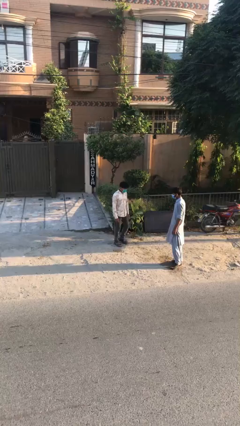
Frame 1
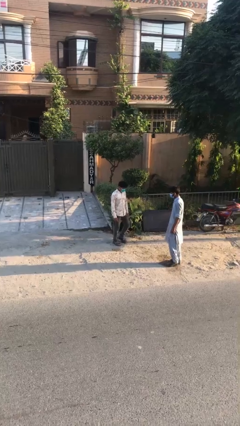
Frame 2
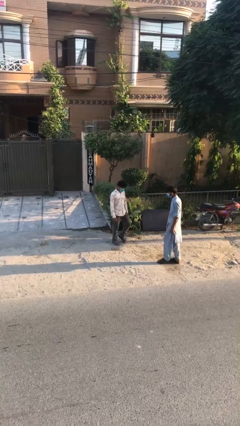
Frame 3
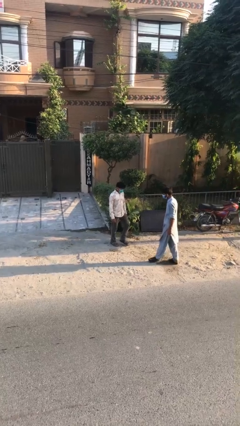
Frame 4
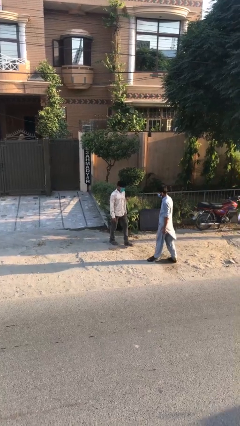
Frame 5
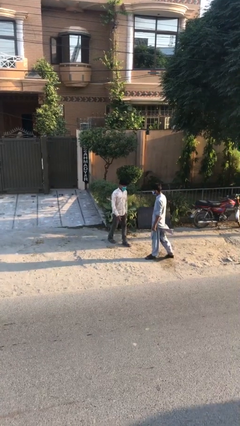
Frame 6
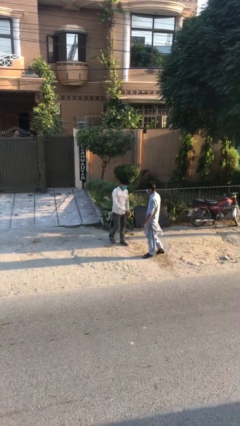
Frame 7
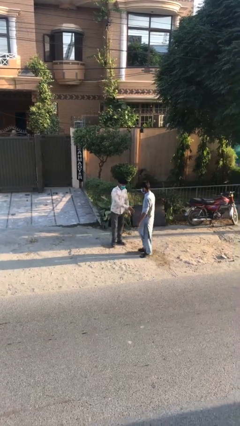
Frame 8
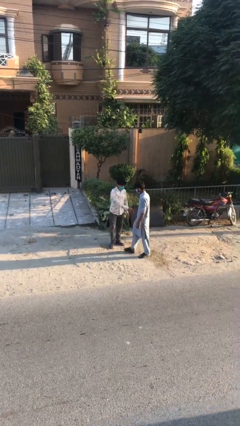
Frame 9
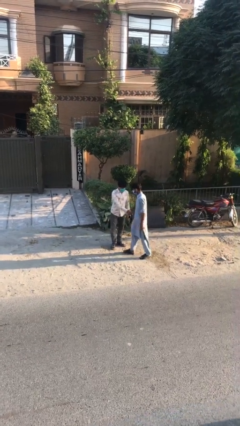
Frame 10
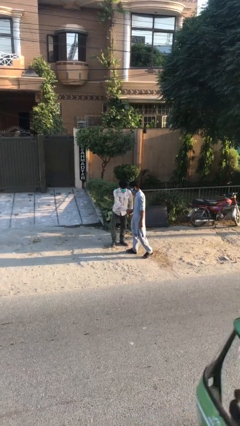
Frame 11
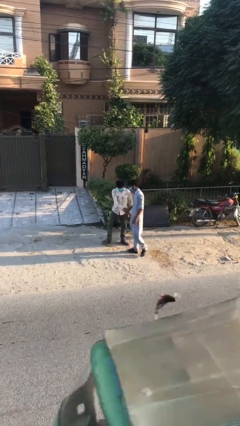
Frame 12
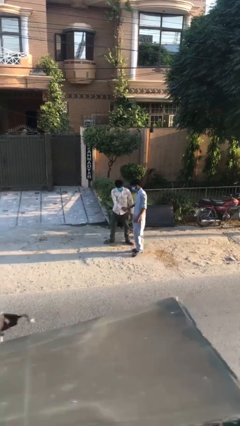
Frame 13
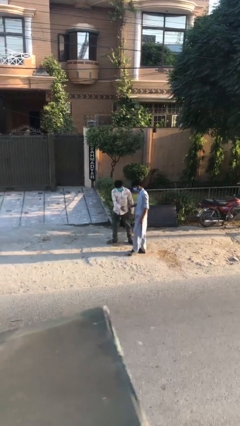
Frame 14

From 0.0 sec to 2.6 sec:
person shakes hand

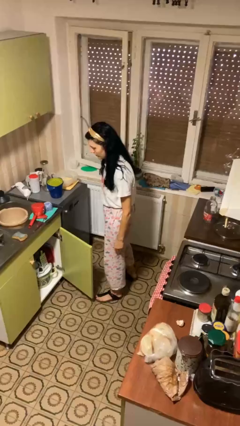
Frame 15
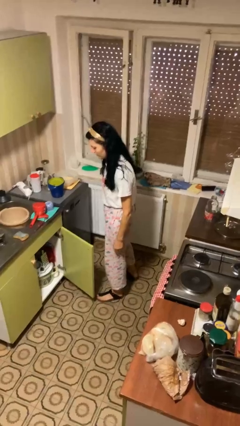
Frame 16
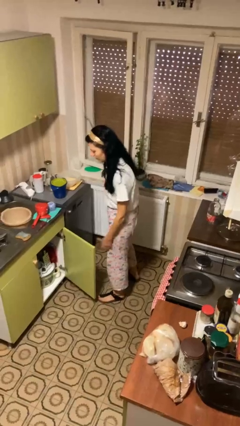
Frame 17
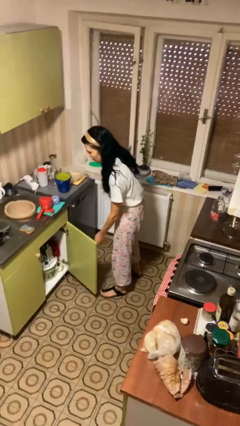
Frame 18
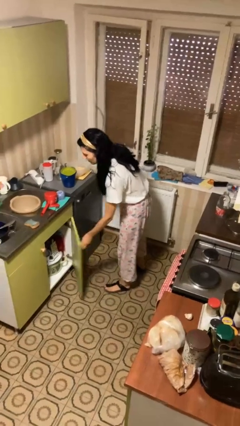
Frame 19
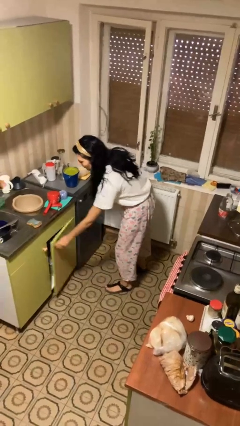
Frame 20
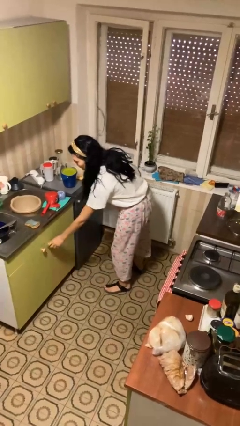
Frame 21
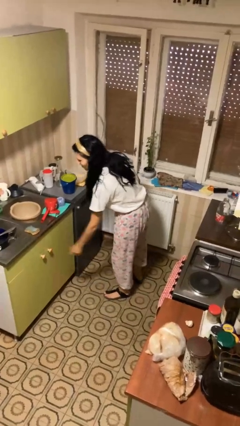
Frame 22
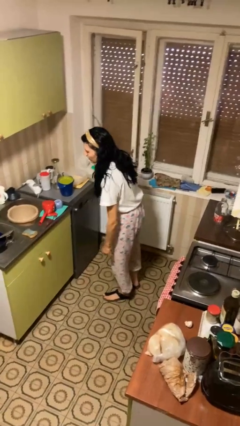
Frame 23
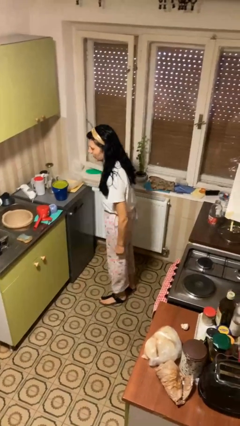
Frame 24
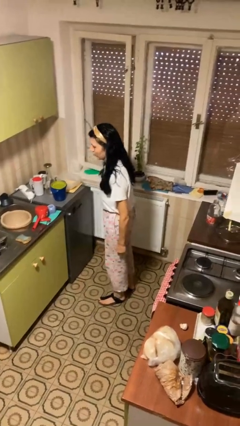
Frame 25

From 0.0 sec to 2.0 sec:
person closes cabinet

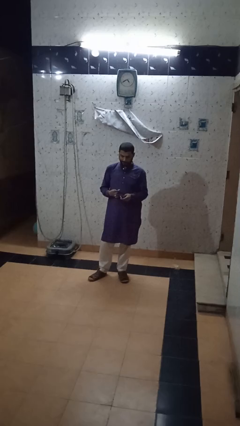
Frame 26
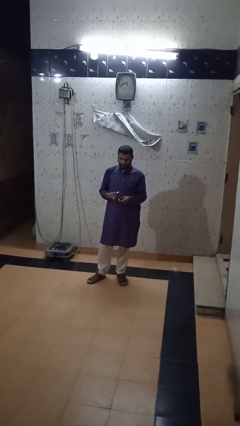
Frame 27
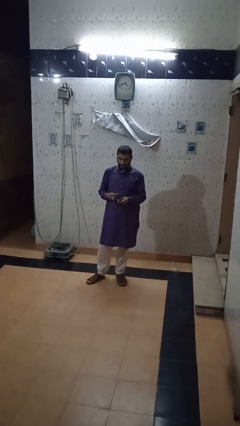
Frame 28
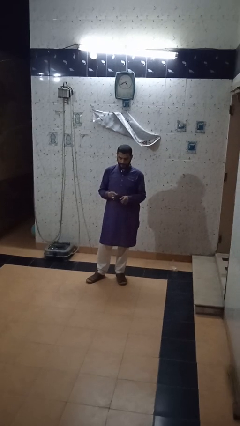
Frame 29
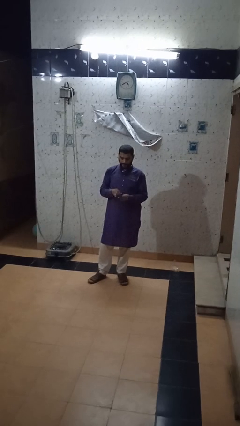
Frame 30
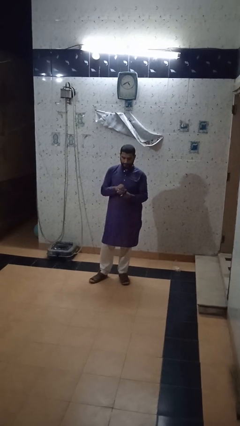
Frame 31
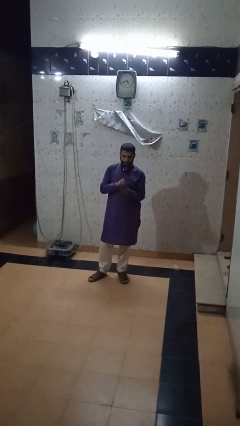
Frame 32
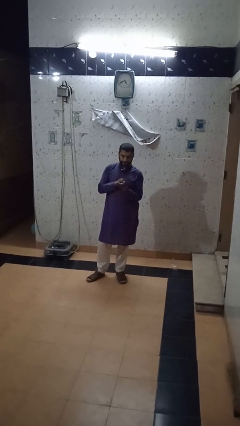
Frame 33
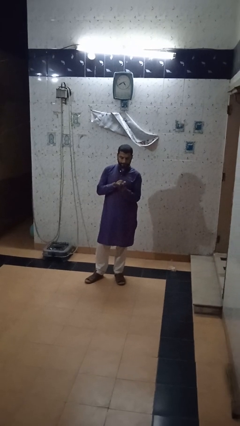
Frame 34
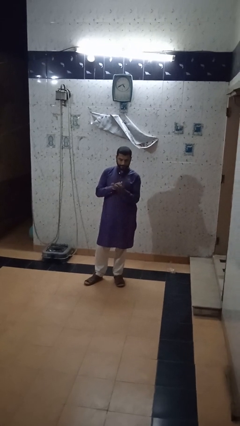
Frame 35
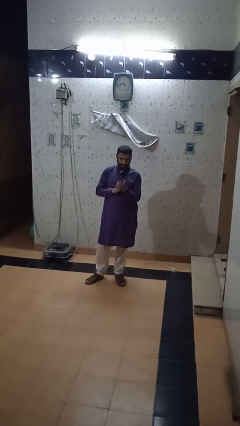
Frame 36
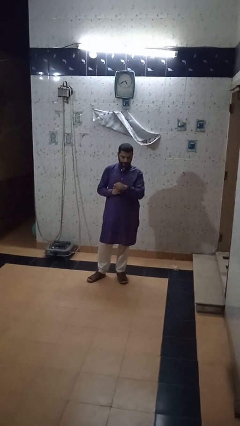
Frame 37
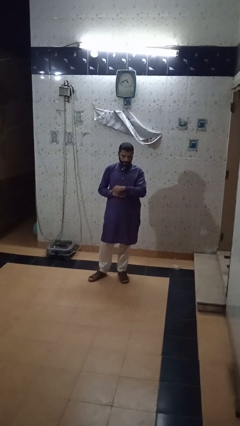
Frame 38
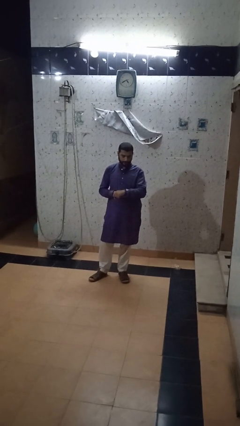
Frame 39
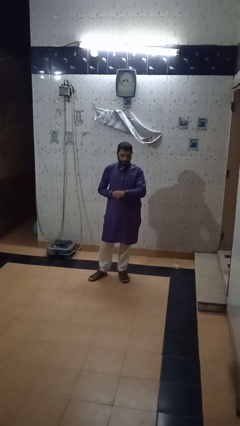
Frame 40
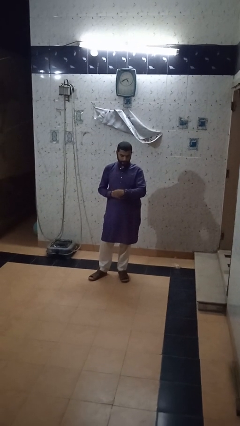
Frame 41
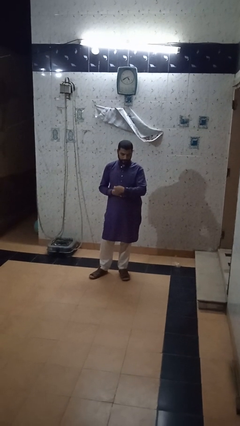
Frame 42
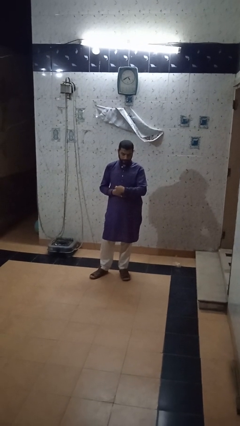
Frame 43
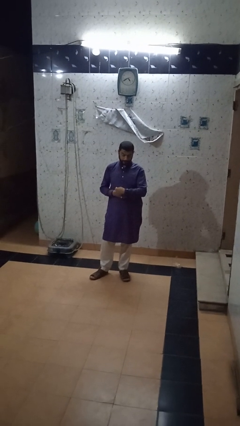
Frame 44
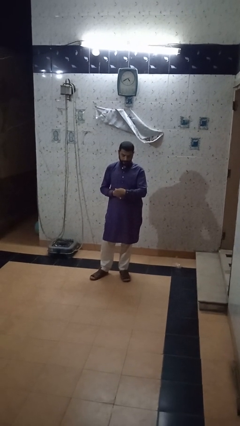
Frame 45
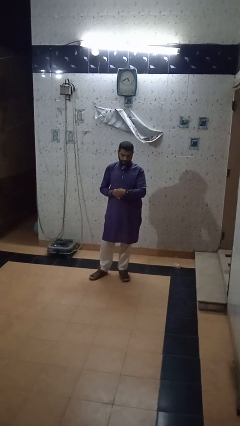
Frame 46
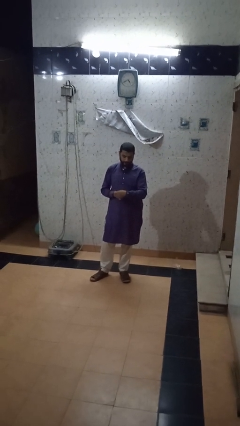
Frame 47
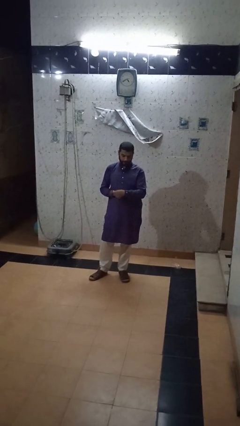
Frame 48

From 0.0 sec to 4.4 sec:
person puts on wristwatch

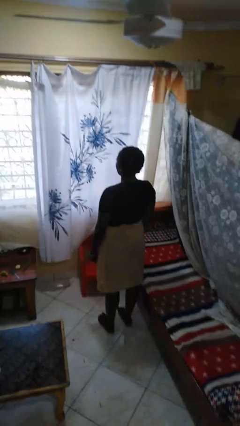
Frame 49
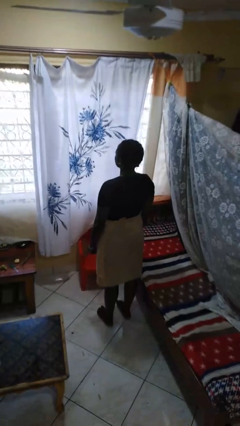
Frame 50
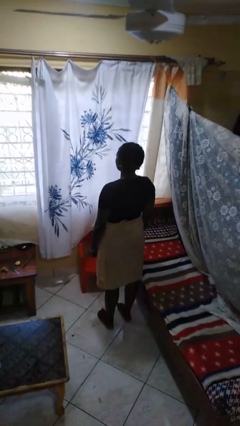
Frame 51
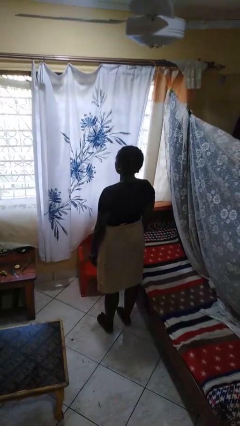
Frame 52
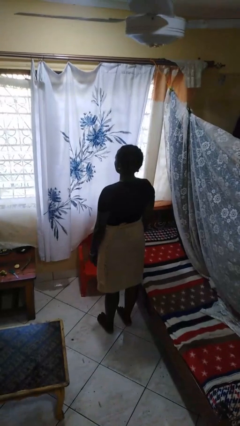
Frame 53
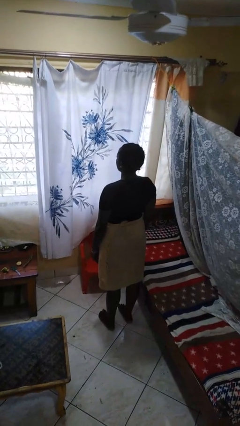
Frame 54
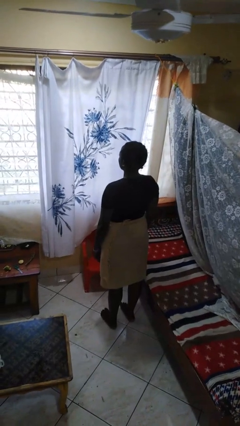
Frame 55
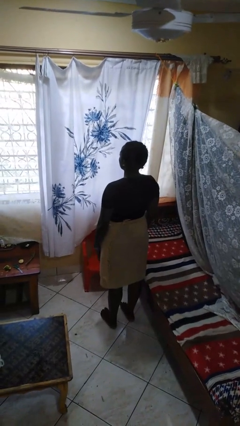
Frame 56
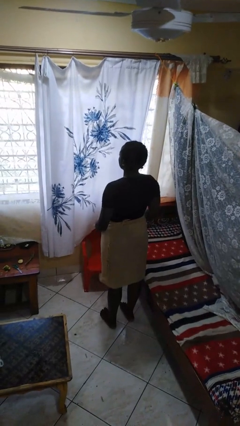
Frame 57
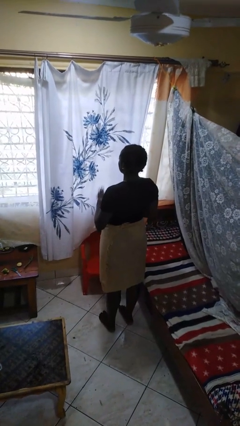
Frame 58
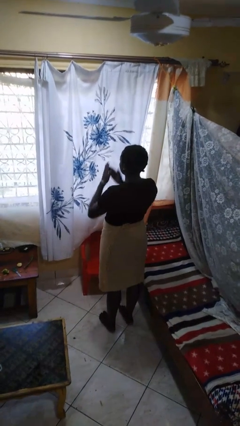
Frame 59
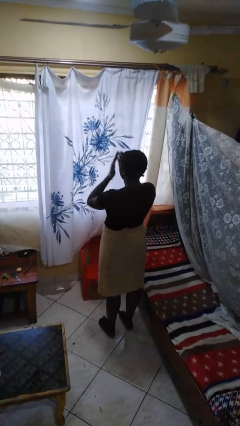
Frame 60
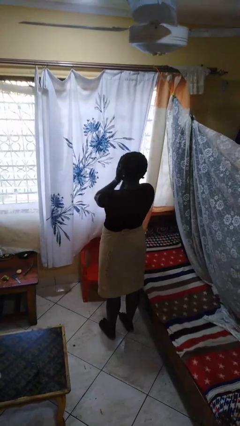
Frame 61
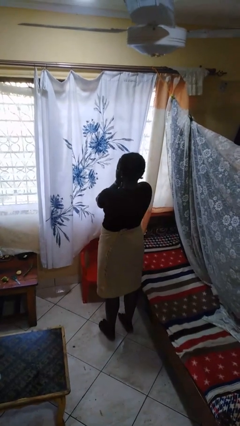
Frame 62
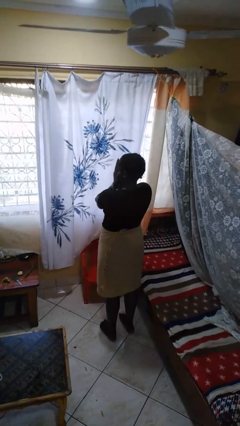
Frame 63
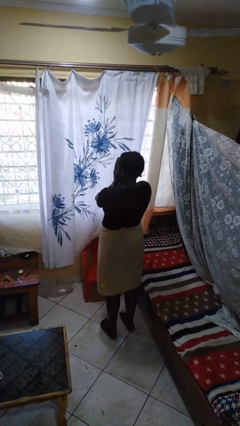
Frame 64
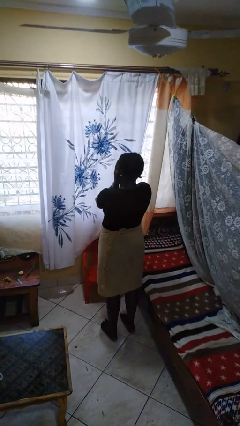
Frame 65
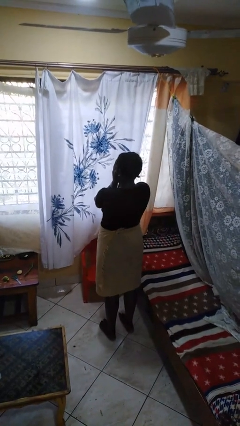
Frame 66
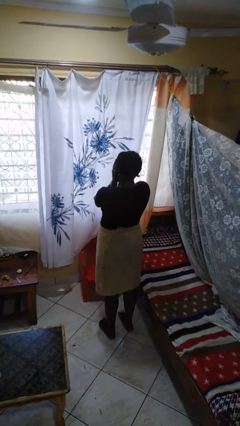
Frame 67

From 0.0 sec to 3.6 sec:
person covers face with hands

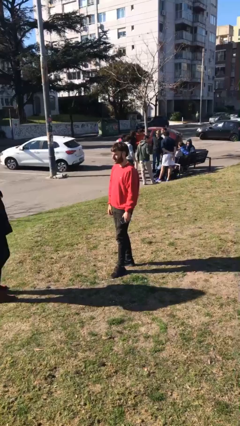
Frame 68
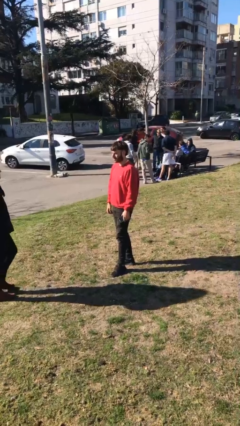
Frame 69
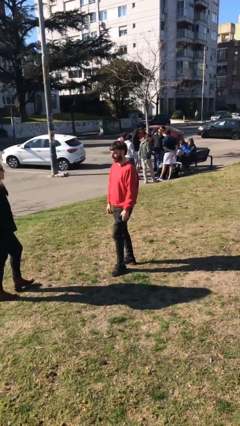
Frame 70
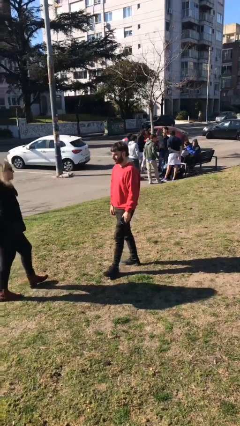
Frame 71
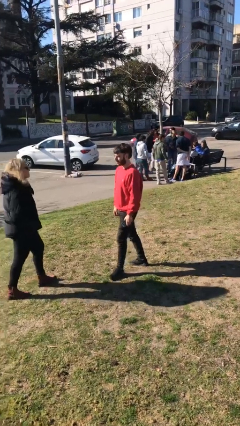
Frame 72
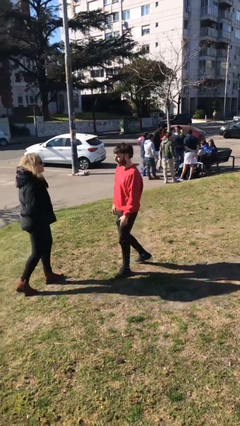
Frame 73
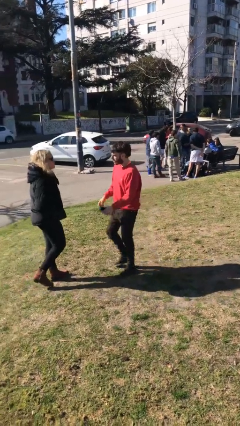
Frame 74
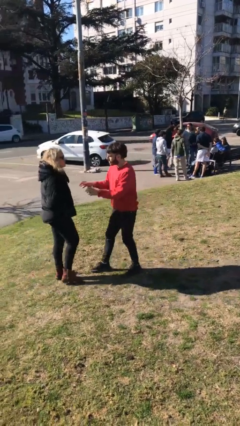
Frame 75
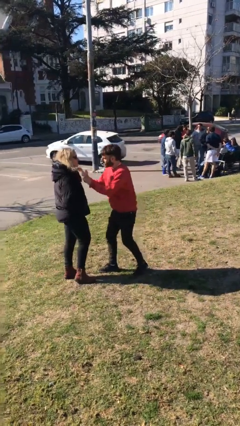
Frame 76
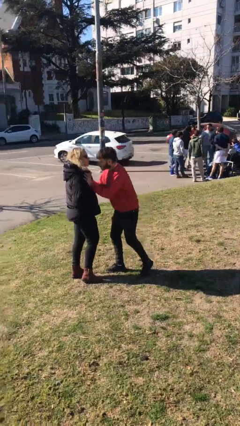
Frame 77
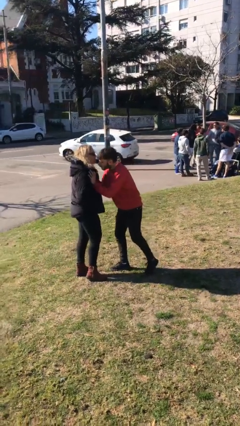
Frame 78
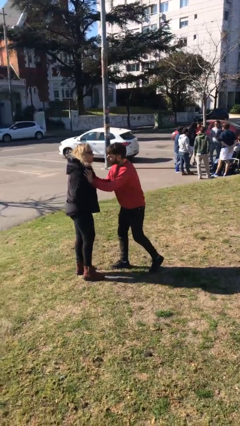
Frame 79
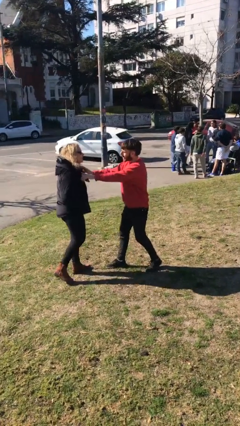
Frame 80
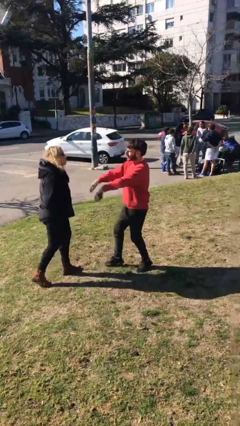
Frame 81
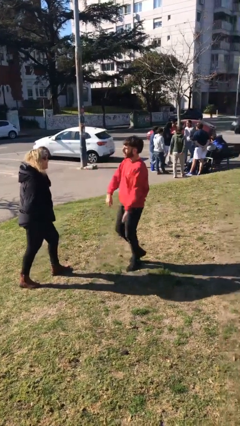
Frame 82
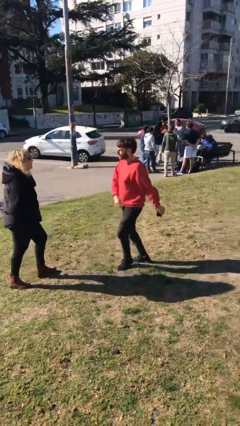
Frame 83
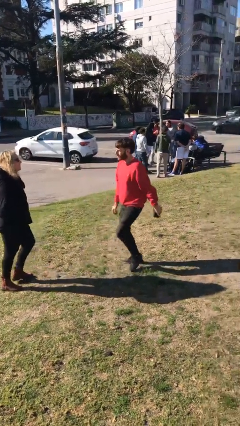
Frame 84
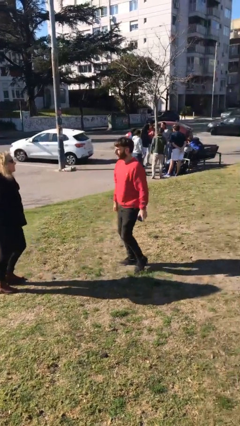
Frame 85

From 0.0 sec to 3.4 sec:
person shoves person

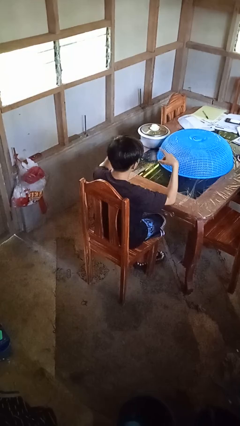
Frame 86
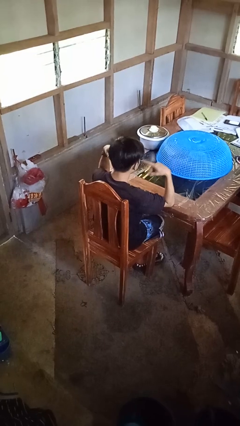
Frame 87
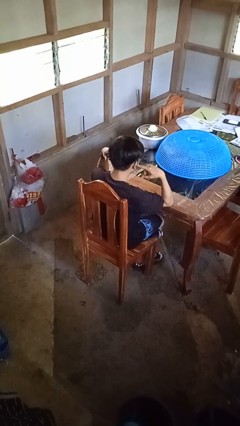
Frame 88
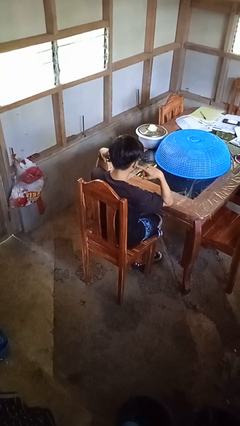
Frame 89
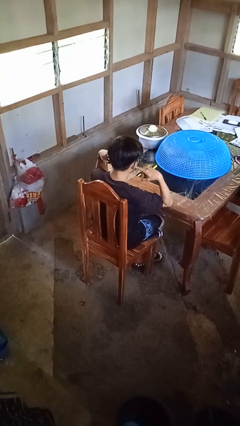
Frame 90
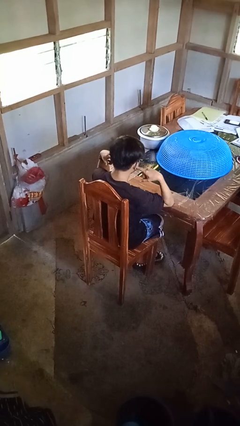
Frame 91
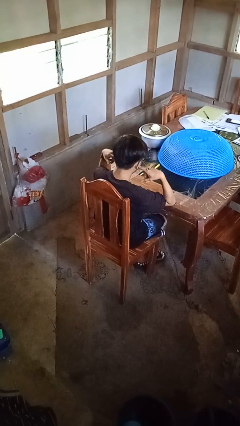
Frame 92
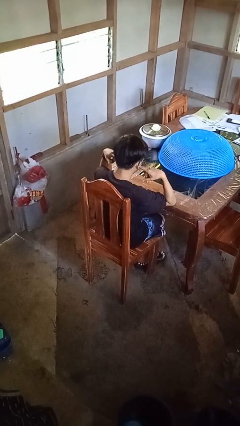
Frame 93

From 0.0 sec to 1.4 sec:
person puts fingers in ear
